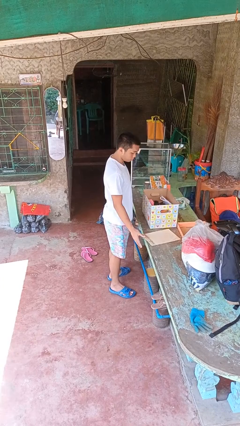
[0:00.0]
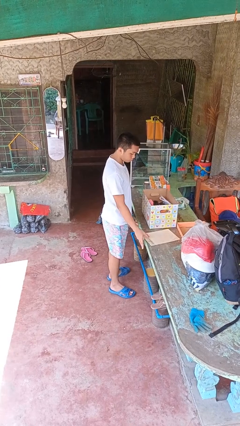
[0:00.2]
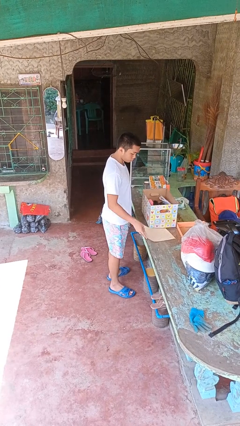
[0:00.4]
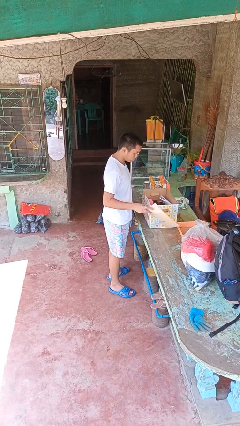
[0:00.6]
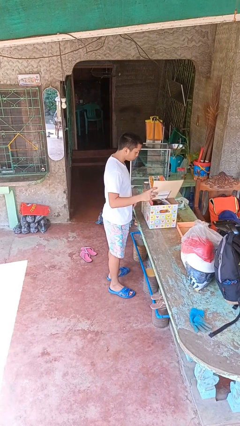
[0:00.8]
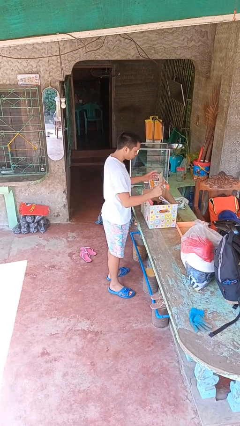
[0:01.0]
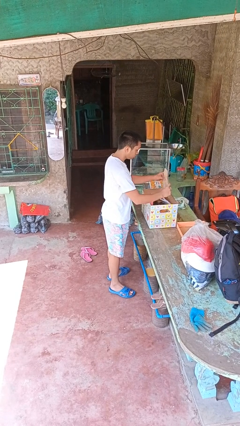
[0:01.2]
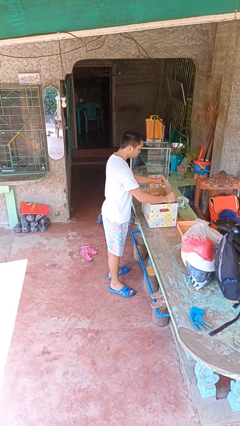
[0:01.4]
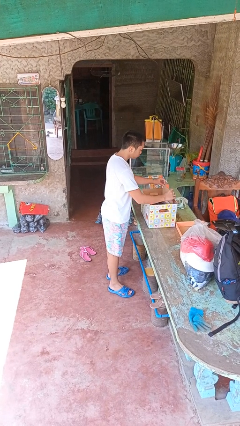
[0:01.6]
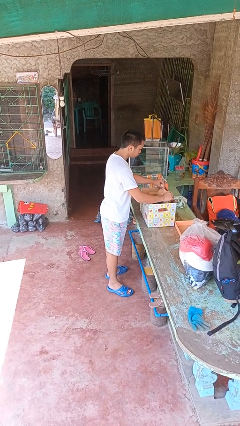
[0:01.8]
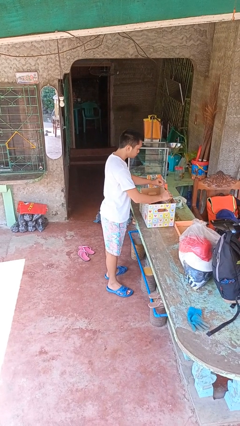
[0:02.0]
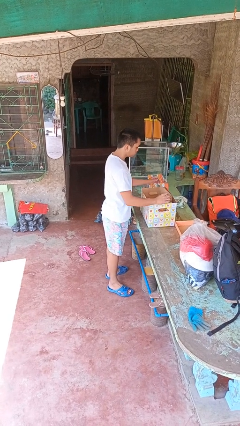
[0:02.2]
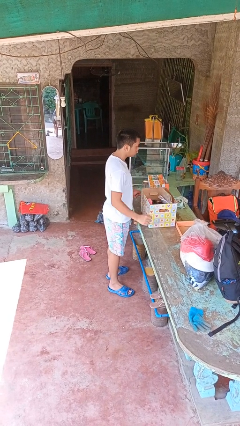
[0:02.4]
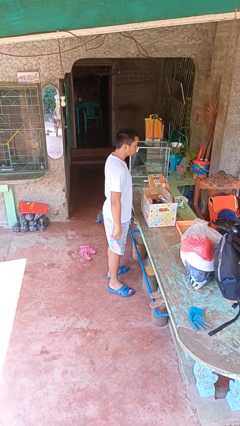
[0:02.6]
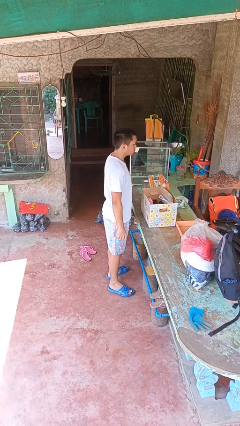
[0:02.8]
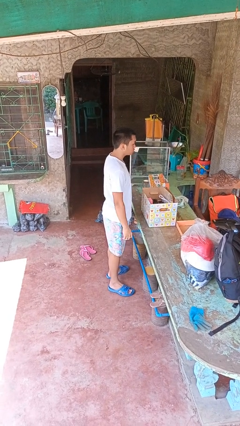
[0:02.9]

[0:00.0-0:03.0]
person puts object into box

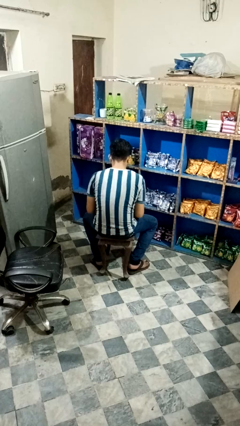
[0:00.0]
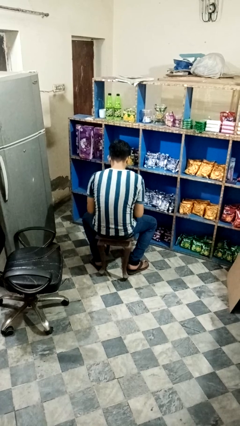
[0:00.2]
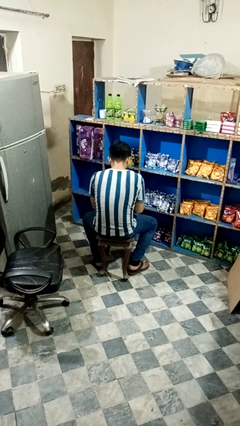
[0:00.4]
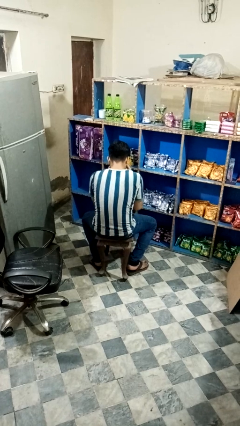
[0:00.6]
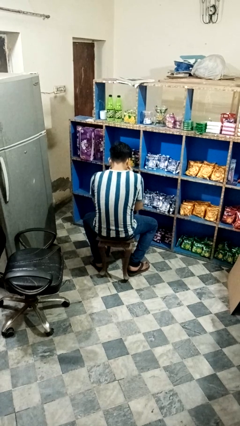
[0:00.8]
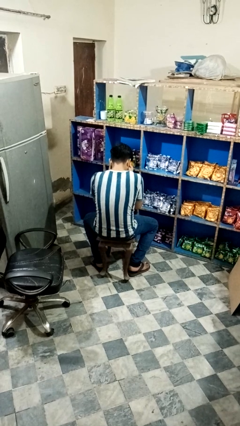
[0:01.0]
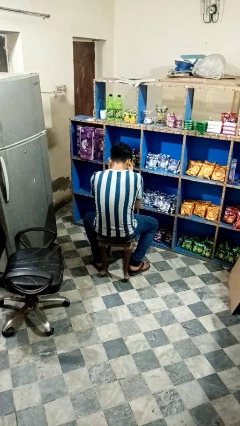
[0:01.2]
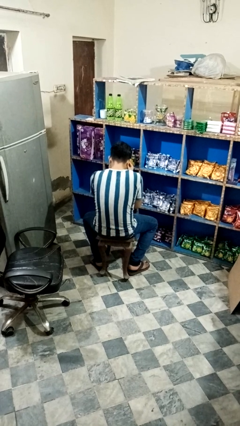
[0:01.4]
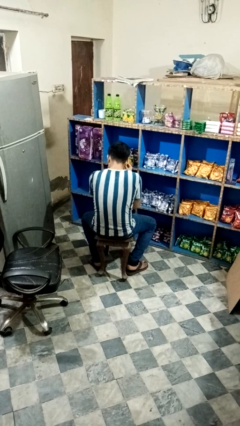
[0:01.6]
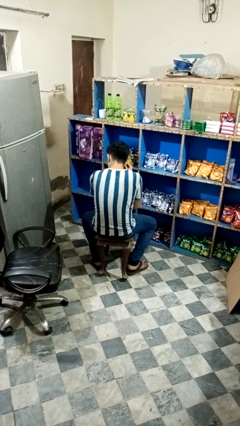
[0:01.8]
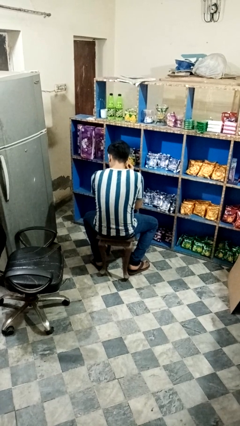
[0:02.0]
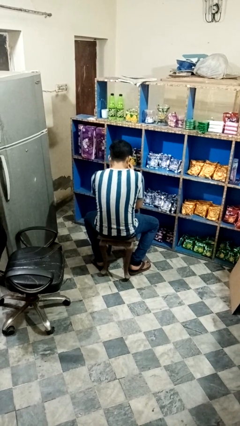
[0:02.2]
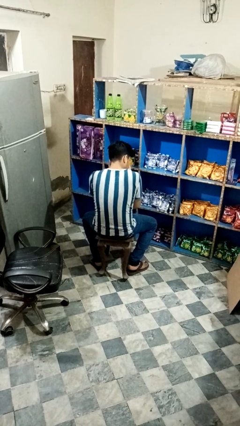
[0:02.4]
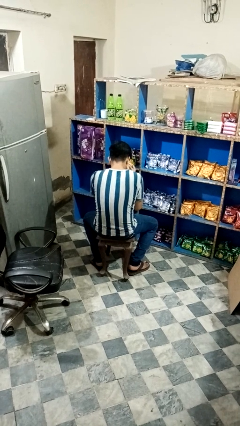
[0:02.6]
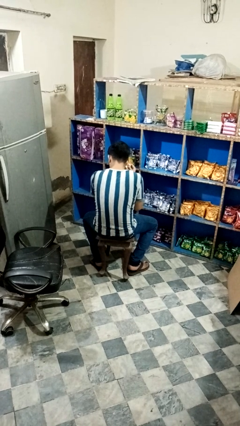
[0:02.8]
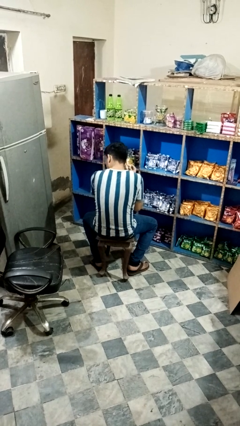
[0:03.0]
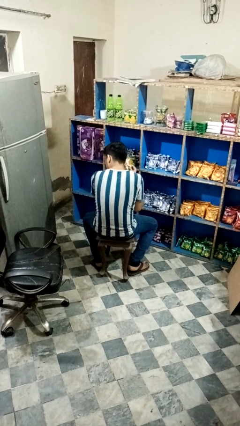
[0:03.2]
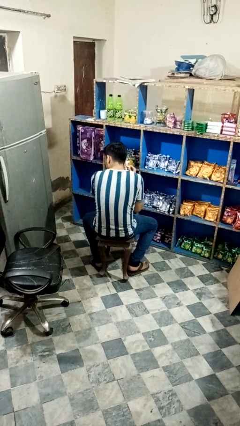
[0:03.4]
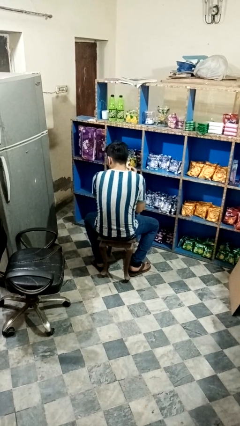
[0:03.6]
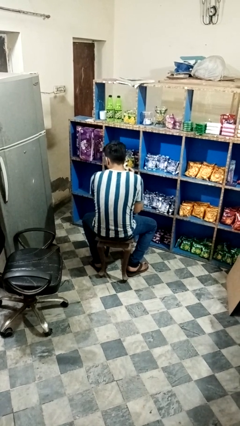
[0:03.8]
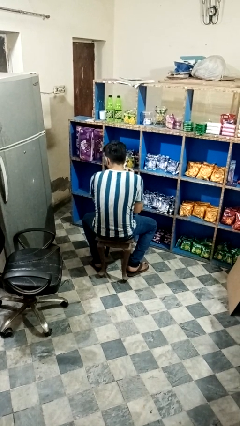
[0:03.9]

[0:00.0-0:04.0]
person wipes mouth with napkin

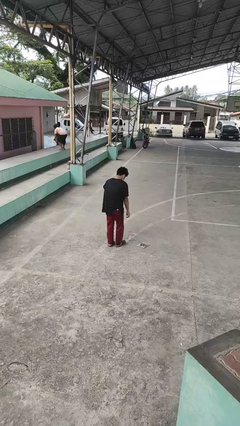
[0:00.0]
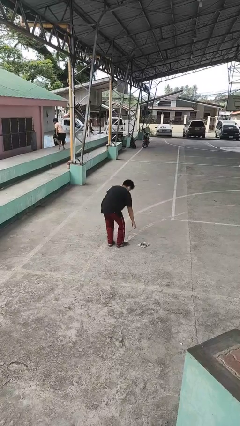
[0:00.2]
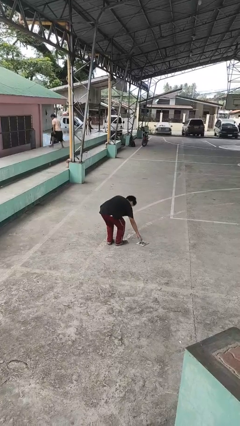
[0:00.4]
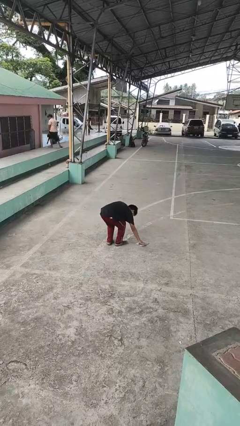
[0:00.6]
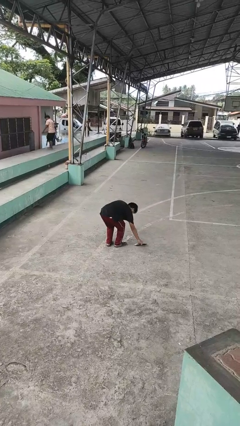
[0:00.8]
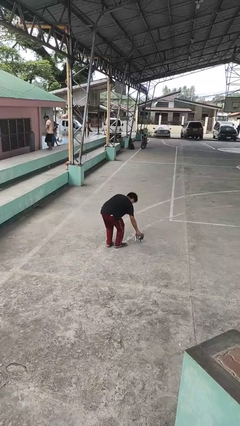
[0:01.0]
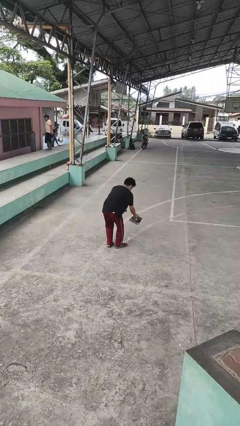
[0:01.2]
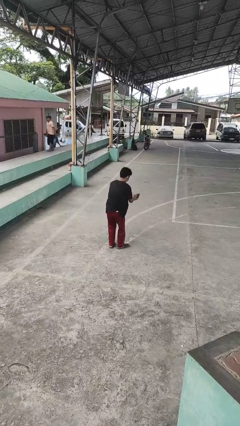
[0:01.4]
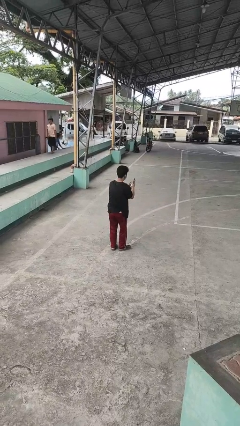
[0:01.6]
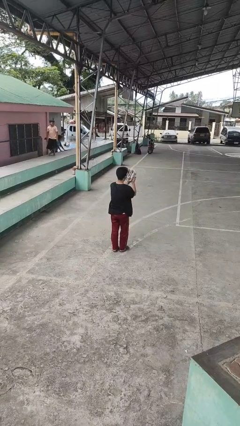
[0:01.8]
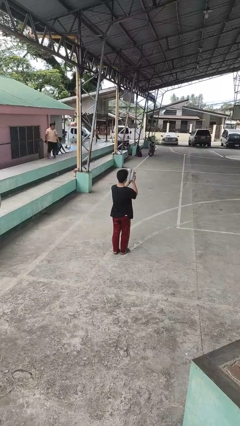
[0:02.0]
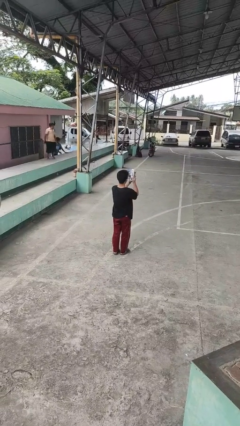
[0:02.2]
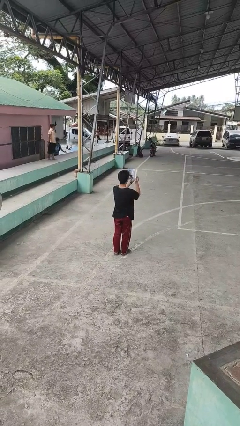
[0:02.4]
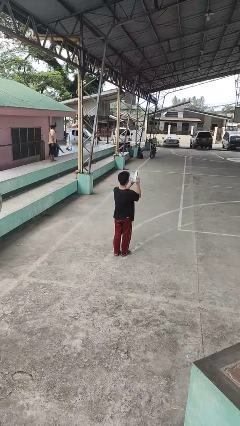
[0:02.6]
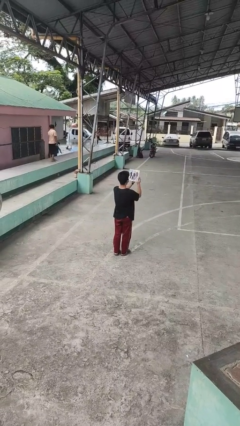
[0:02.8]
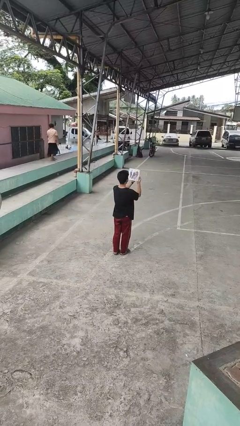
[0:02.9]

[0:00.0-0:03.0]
person picks up object from floor

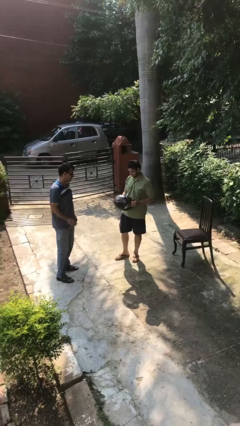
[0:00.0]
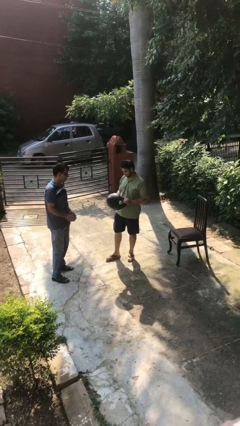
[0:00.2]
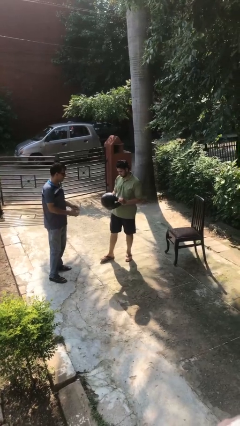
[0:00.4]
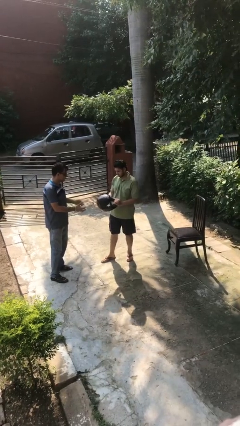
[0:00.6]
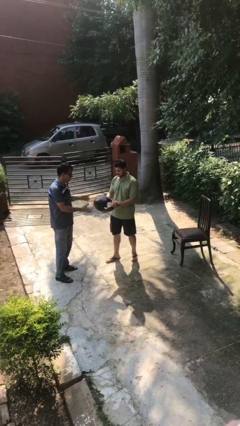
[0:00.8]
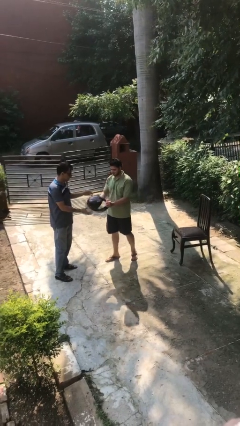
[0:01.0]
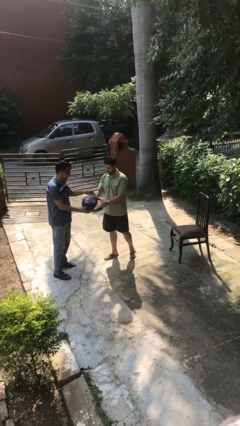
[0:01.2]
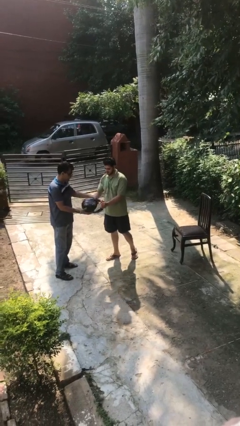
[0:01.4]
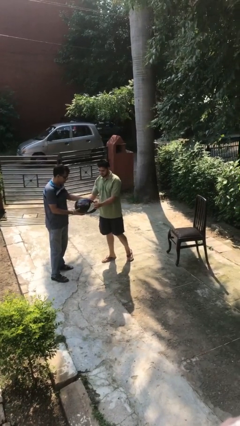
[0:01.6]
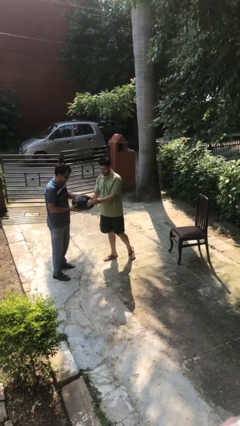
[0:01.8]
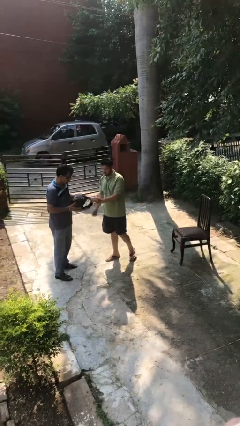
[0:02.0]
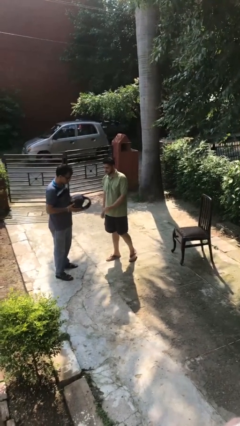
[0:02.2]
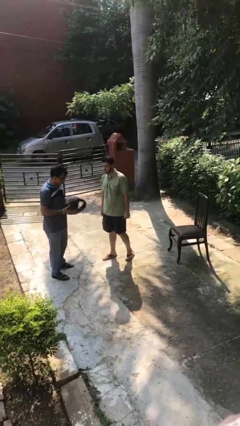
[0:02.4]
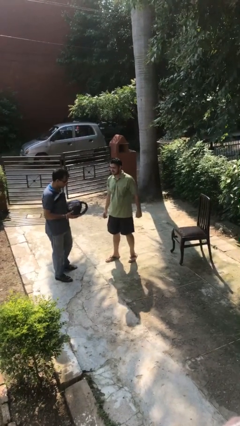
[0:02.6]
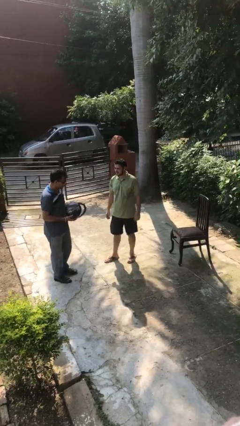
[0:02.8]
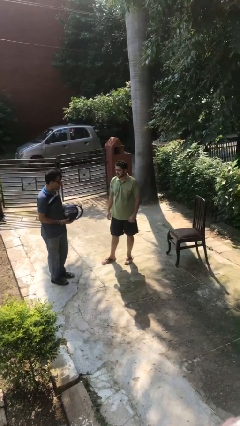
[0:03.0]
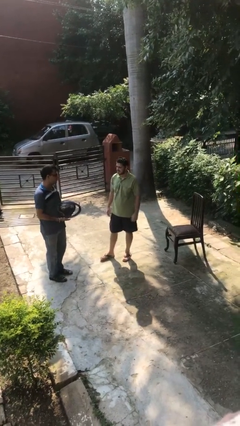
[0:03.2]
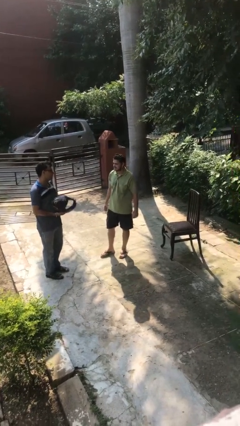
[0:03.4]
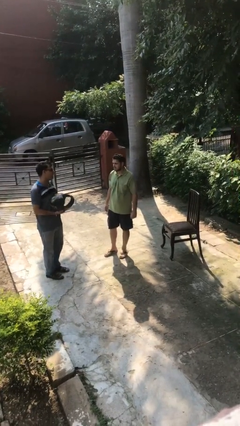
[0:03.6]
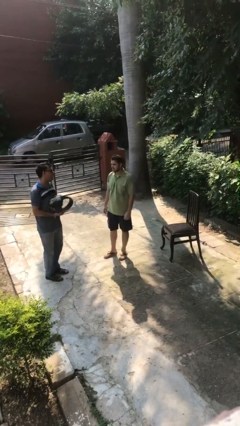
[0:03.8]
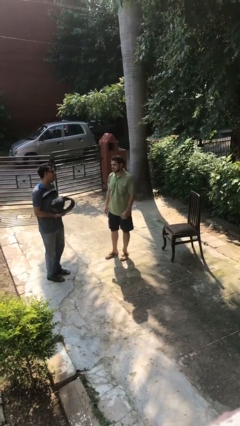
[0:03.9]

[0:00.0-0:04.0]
person transfers object to person

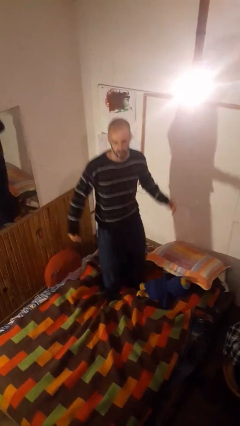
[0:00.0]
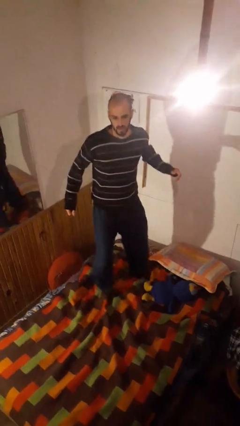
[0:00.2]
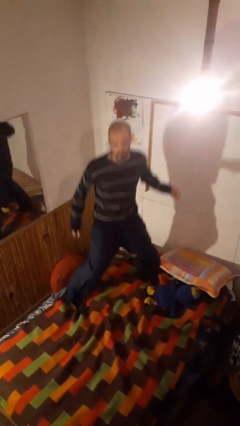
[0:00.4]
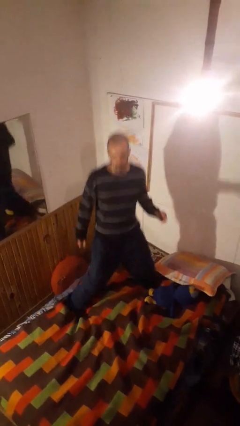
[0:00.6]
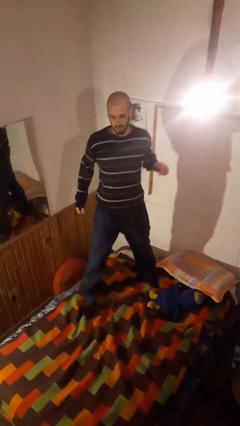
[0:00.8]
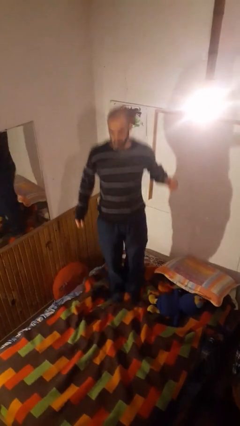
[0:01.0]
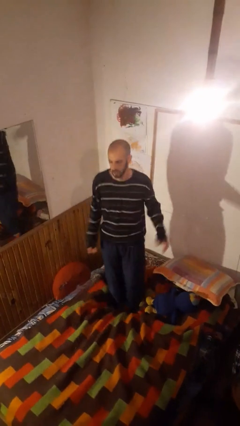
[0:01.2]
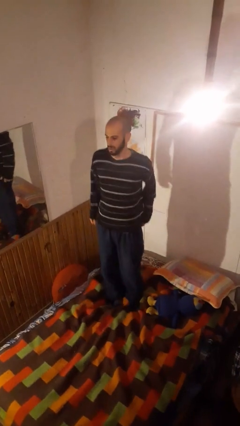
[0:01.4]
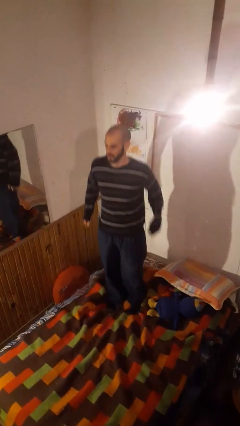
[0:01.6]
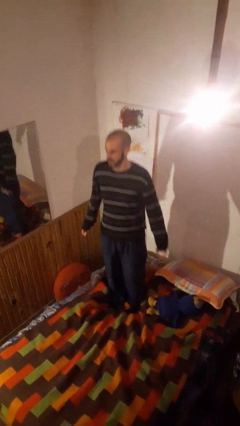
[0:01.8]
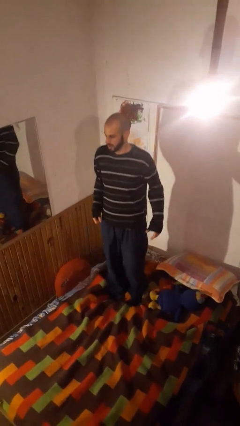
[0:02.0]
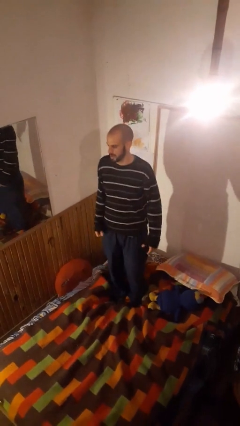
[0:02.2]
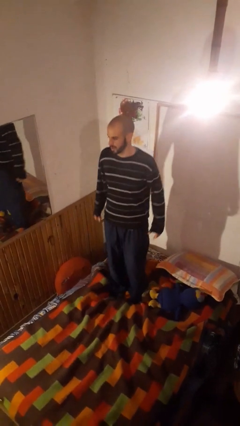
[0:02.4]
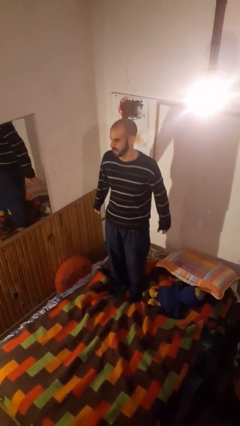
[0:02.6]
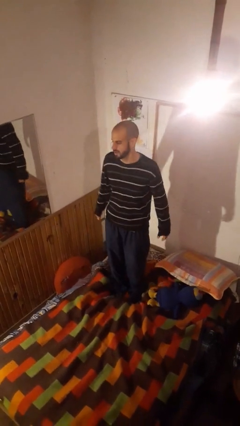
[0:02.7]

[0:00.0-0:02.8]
person jumps on bed

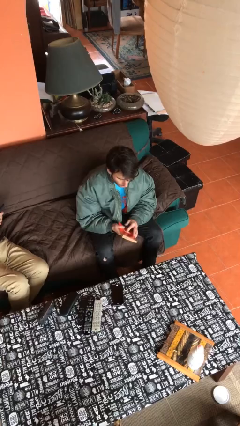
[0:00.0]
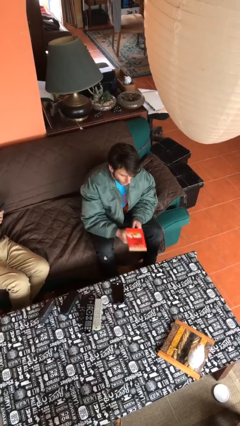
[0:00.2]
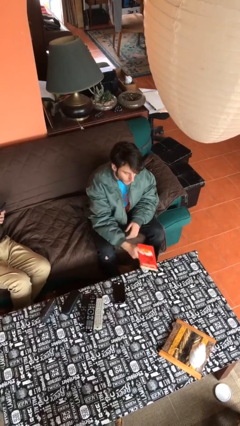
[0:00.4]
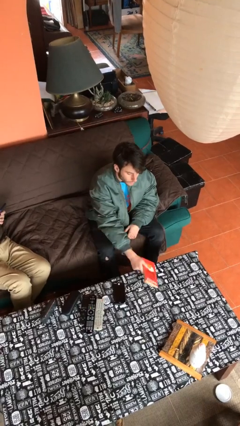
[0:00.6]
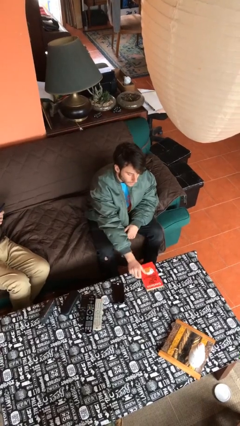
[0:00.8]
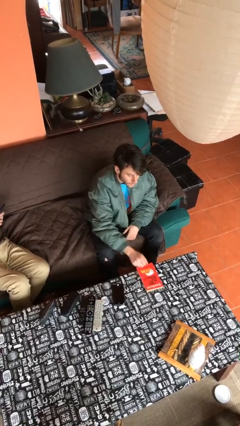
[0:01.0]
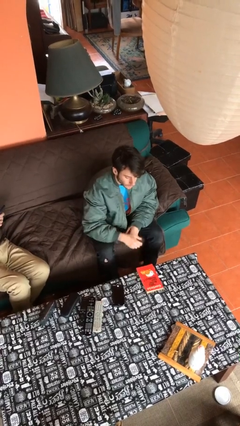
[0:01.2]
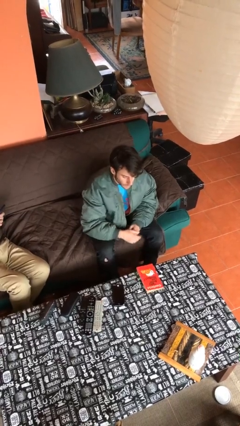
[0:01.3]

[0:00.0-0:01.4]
person puts down object on table
